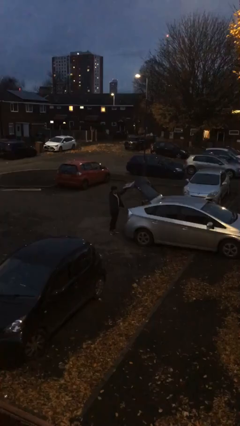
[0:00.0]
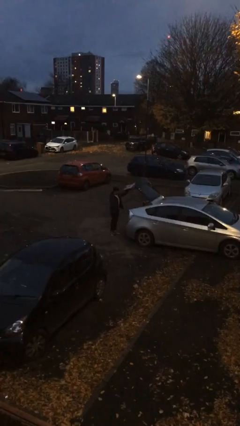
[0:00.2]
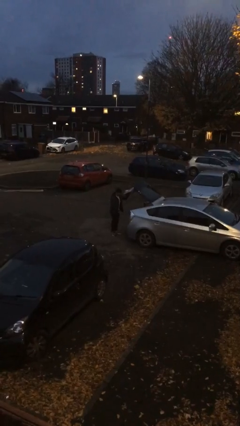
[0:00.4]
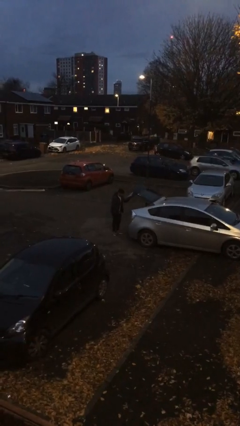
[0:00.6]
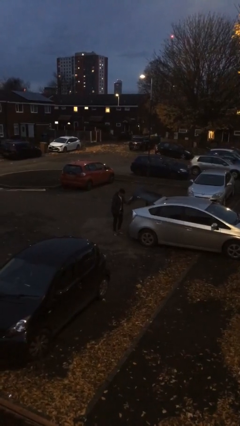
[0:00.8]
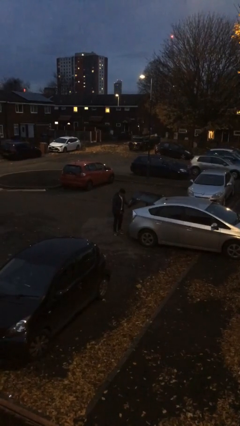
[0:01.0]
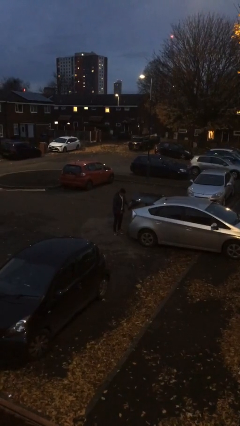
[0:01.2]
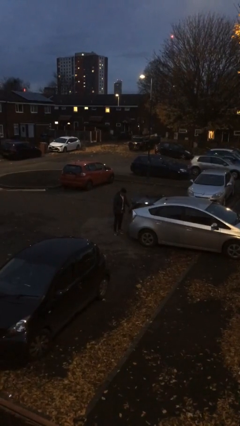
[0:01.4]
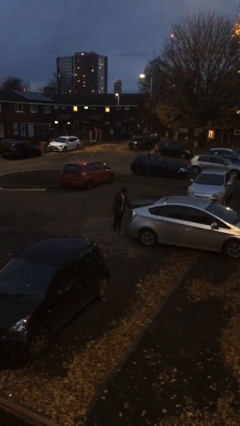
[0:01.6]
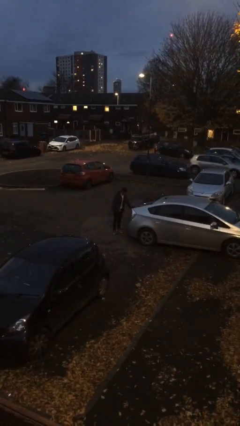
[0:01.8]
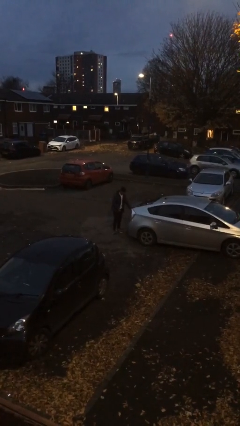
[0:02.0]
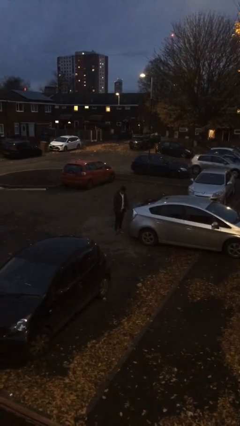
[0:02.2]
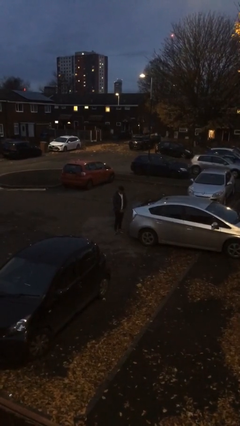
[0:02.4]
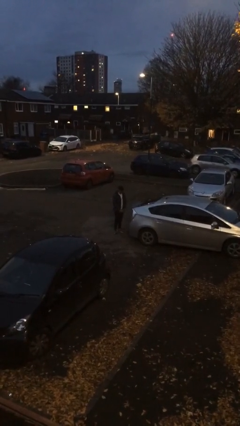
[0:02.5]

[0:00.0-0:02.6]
person closes car trunk

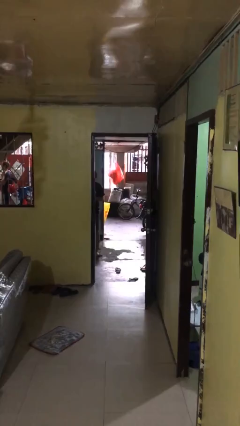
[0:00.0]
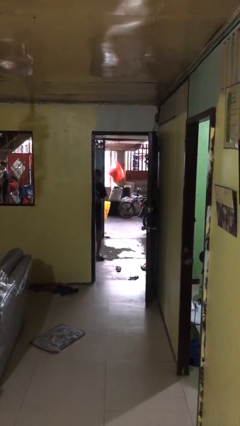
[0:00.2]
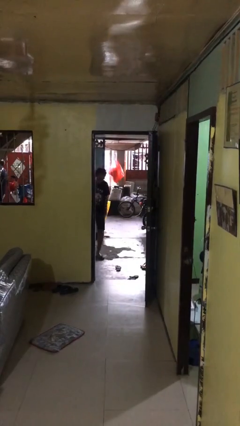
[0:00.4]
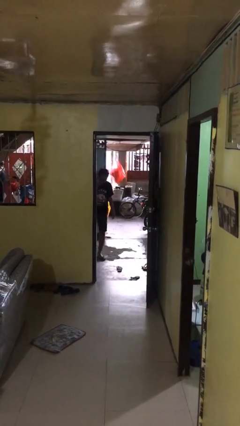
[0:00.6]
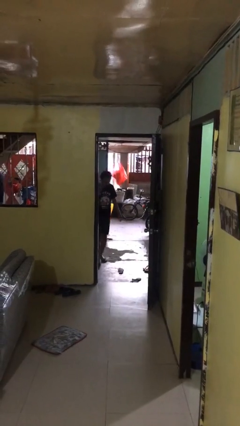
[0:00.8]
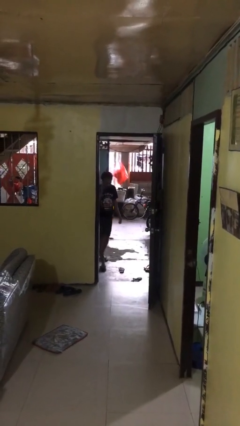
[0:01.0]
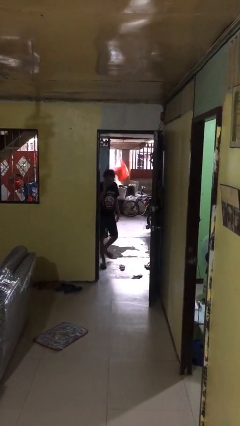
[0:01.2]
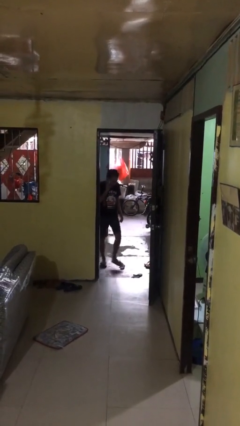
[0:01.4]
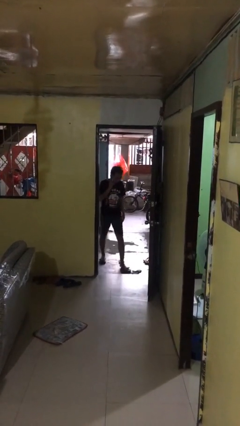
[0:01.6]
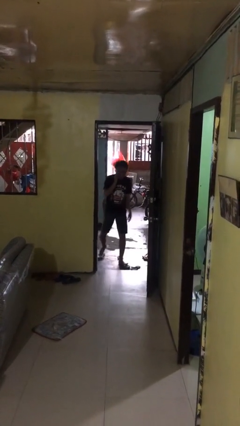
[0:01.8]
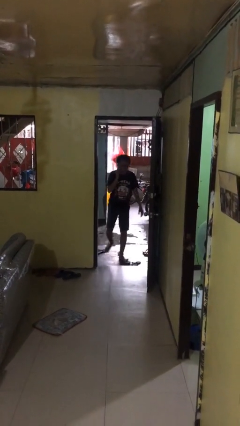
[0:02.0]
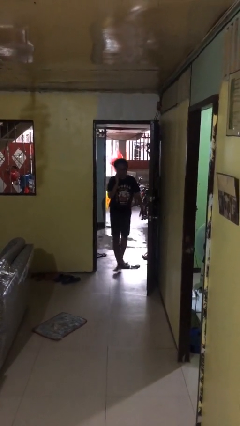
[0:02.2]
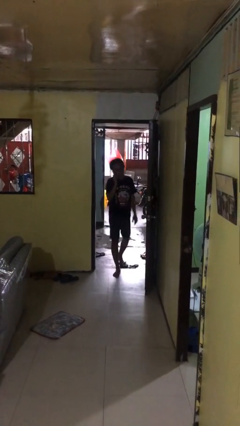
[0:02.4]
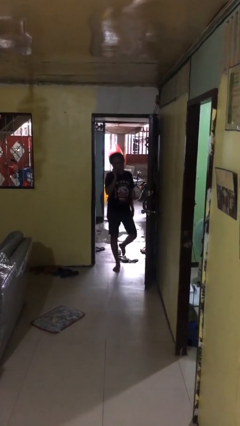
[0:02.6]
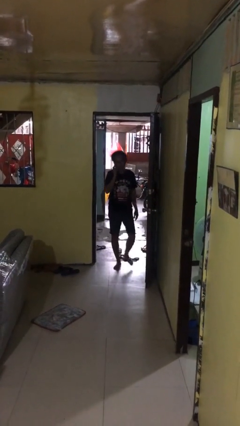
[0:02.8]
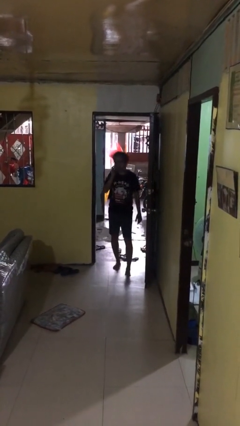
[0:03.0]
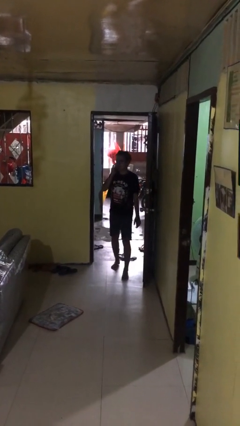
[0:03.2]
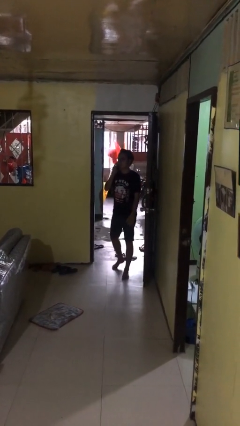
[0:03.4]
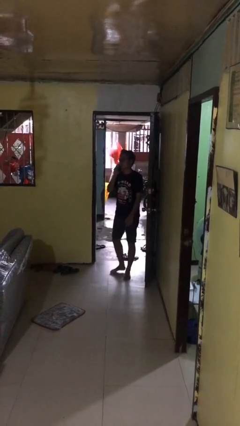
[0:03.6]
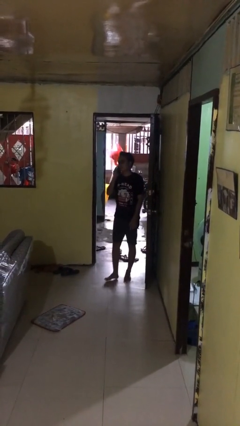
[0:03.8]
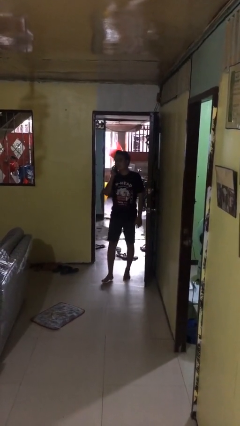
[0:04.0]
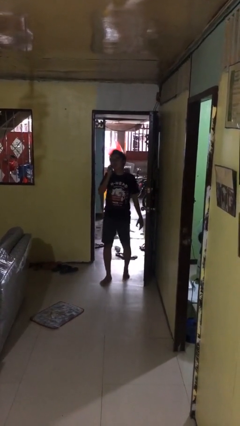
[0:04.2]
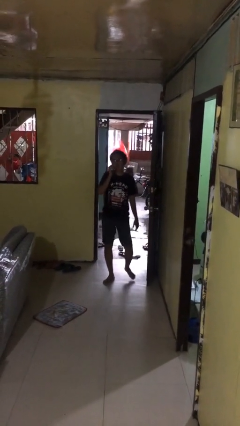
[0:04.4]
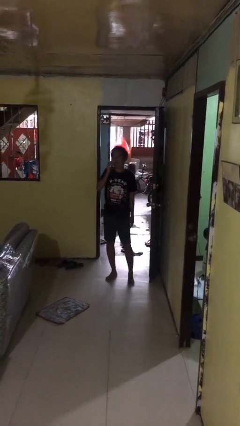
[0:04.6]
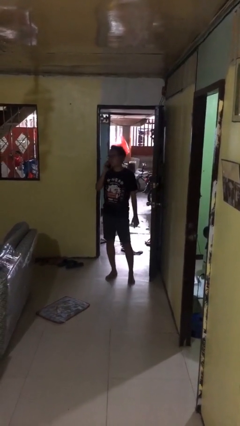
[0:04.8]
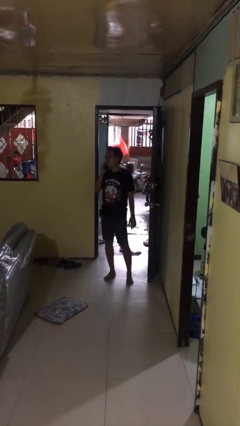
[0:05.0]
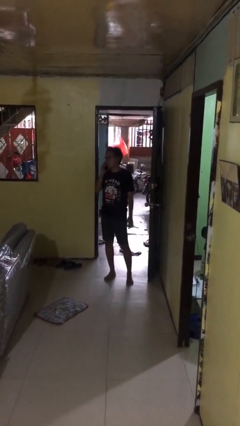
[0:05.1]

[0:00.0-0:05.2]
person enters scene through structure

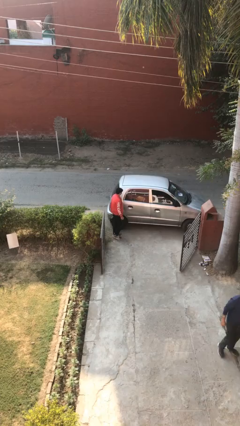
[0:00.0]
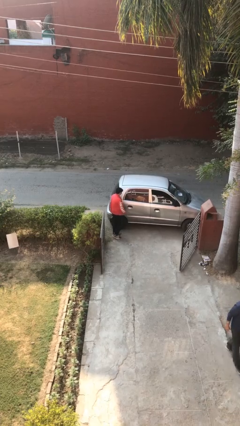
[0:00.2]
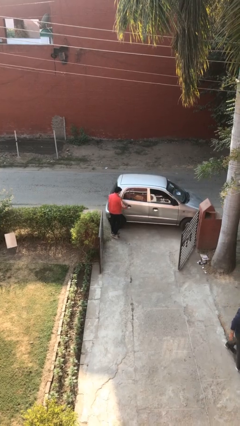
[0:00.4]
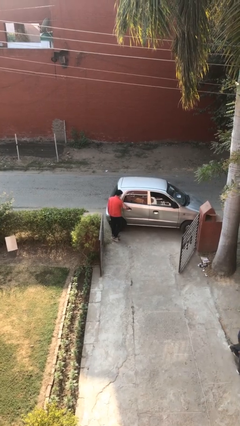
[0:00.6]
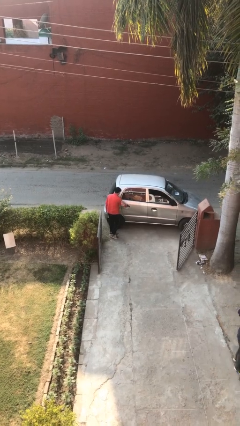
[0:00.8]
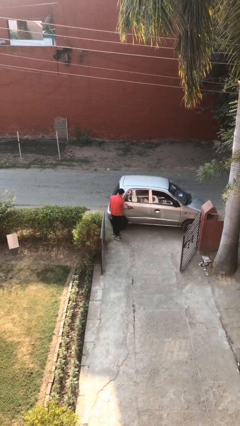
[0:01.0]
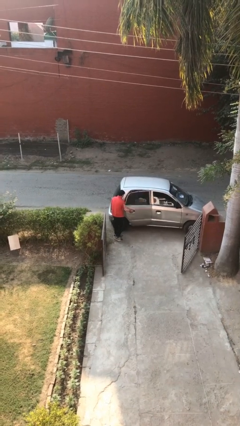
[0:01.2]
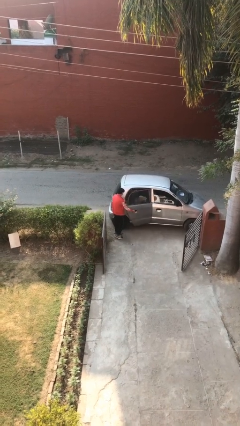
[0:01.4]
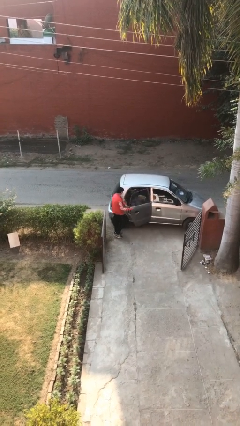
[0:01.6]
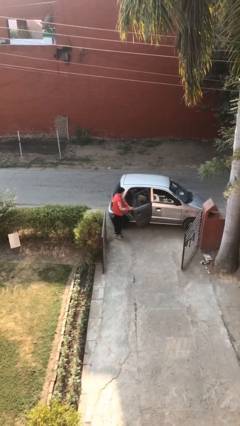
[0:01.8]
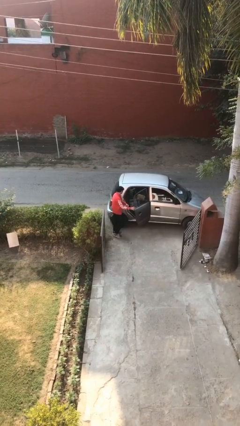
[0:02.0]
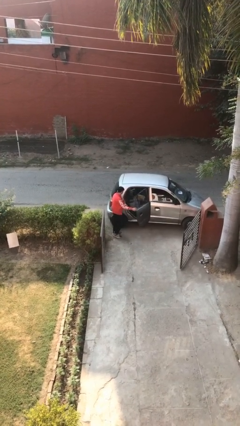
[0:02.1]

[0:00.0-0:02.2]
person opens car door

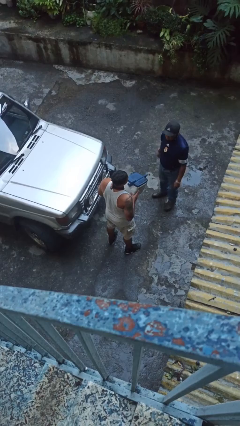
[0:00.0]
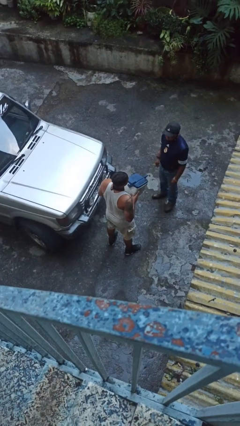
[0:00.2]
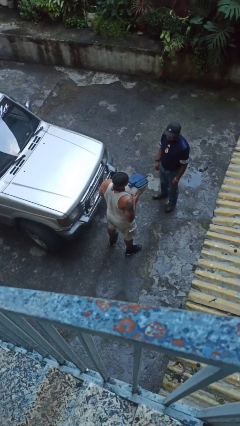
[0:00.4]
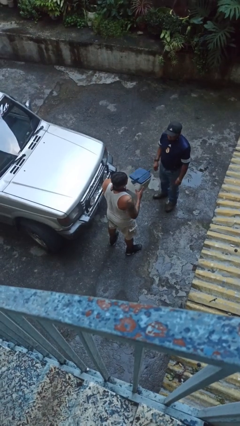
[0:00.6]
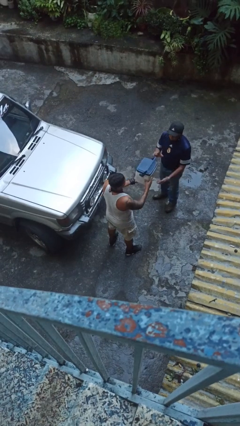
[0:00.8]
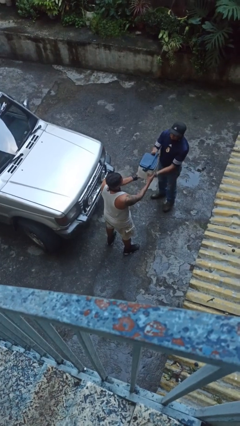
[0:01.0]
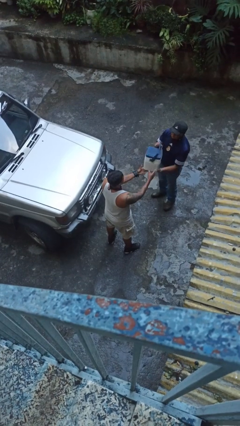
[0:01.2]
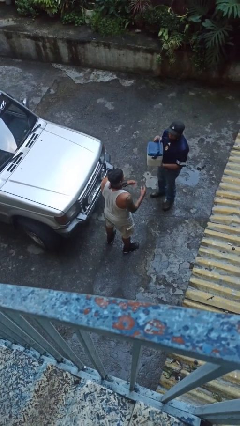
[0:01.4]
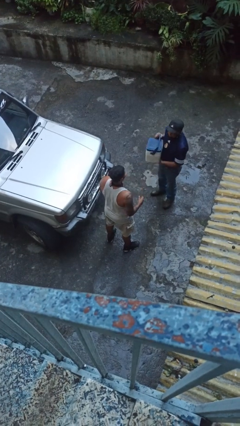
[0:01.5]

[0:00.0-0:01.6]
person transfers object to person

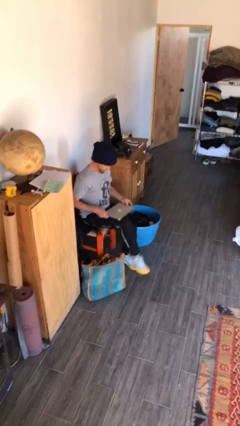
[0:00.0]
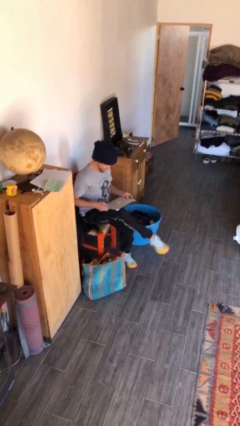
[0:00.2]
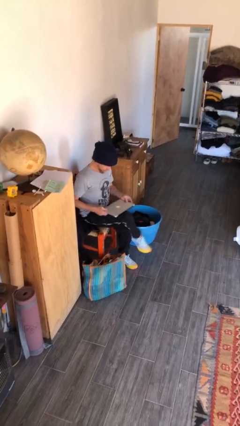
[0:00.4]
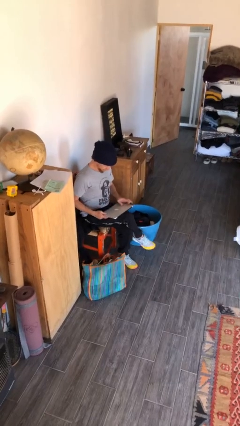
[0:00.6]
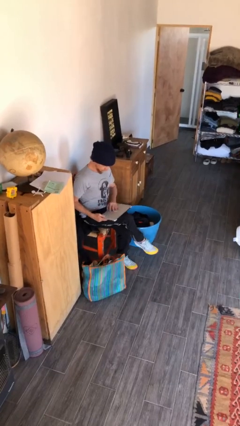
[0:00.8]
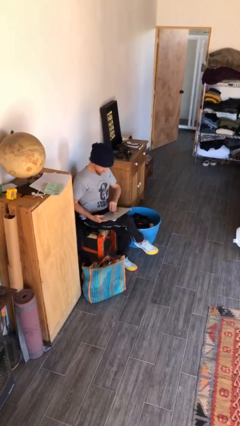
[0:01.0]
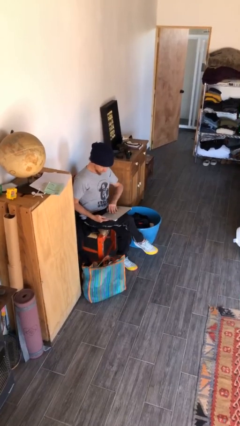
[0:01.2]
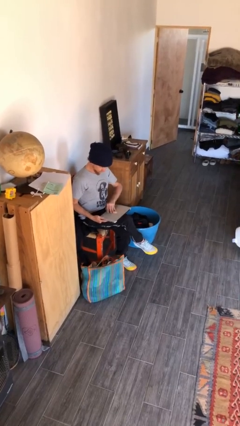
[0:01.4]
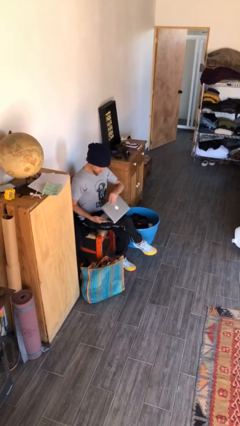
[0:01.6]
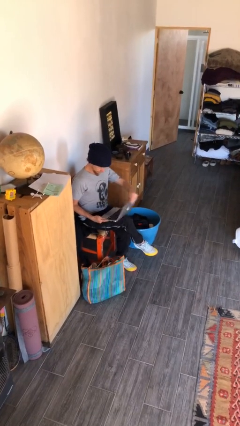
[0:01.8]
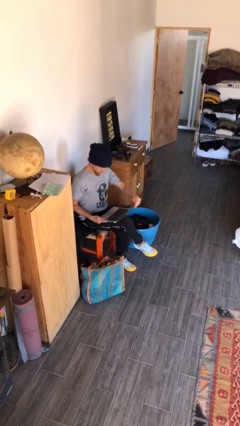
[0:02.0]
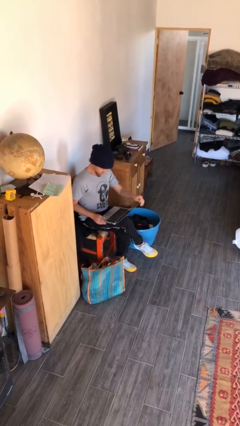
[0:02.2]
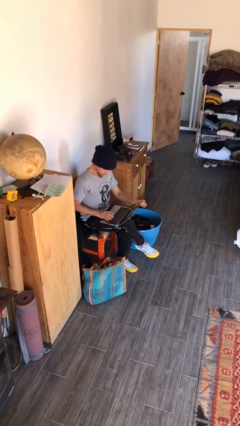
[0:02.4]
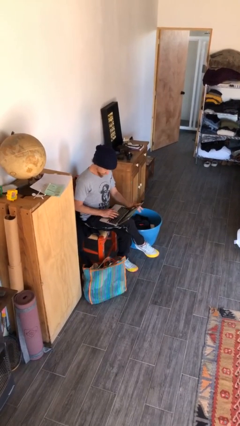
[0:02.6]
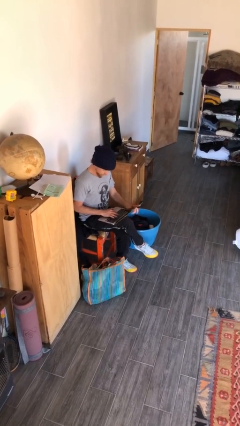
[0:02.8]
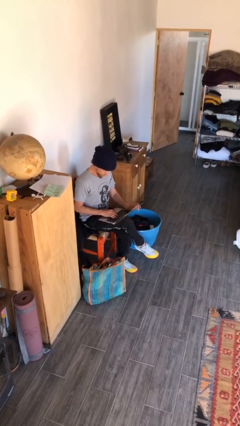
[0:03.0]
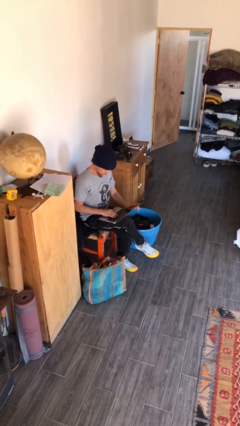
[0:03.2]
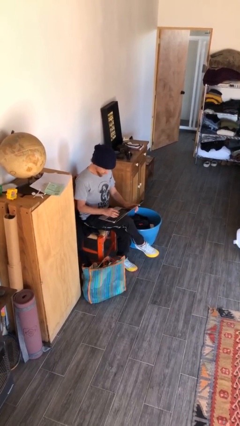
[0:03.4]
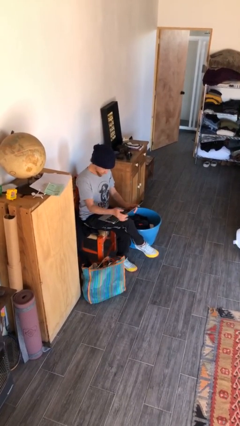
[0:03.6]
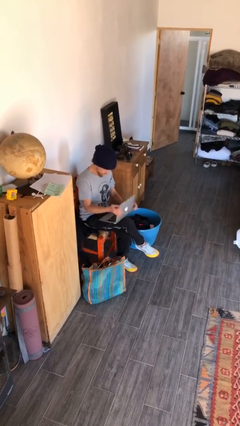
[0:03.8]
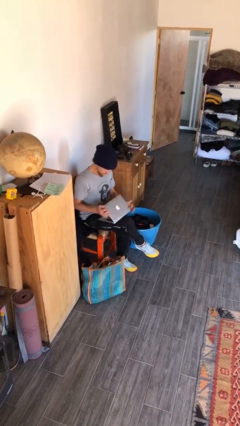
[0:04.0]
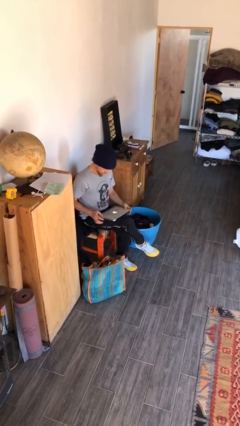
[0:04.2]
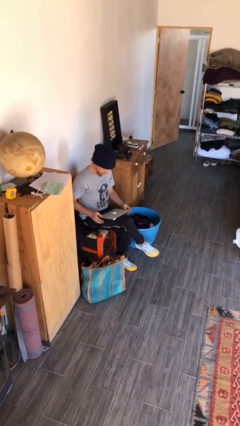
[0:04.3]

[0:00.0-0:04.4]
person interacts with laptop

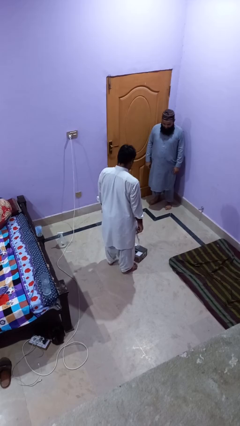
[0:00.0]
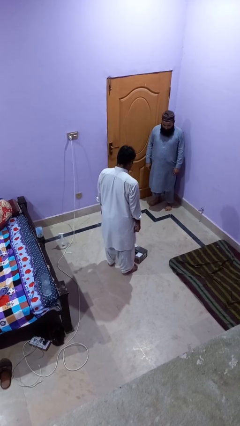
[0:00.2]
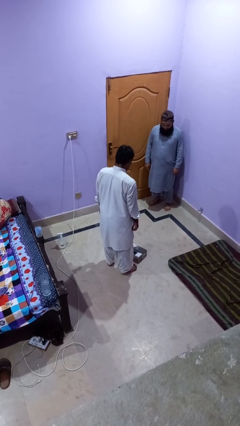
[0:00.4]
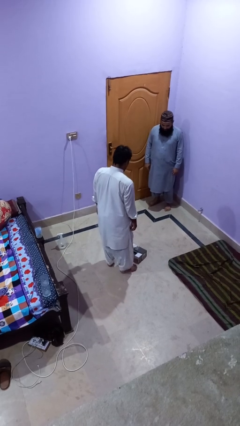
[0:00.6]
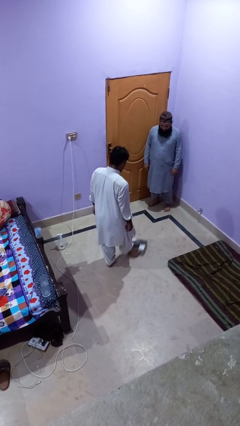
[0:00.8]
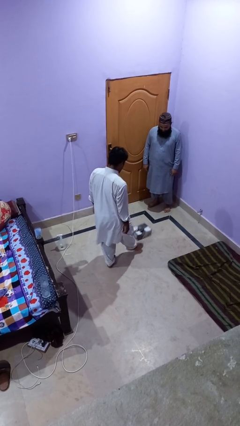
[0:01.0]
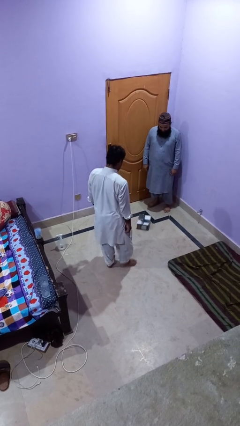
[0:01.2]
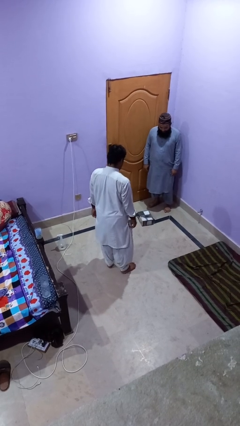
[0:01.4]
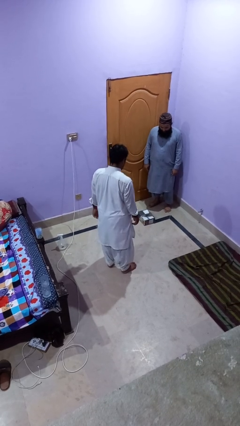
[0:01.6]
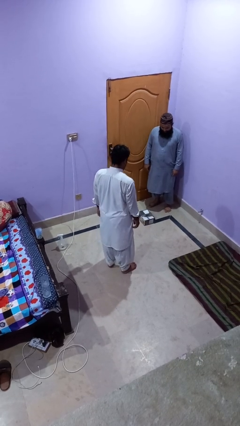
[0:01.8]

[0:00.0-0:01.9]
person kicks object to person
